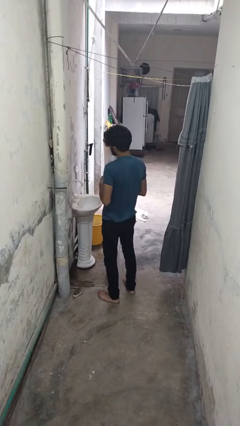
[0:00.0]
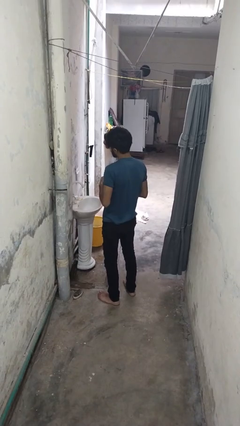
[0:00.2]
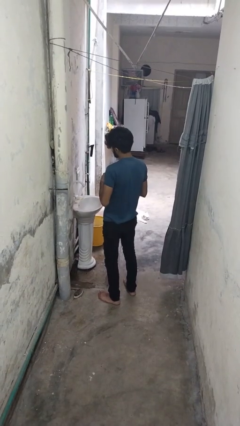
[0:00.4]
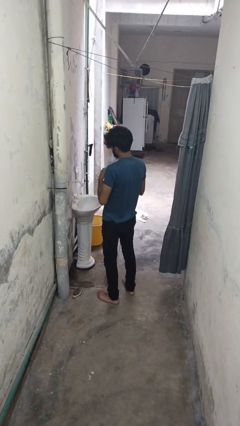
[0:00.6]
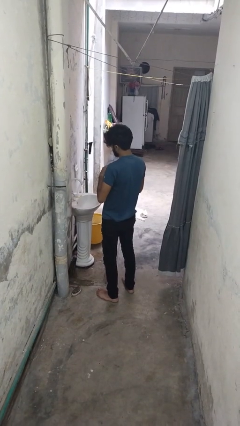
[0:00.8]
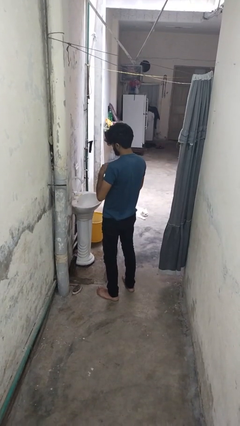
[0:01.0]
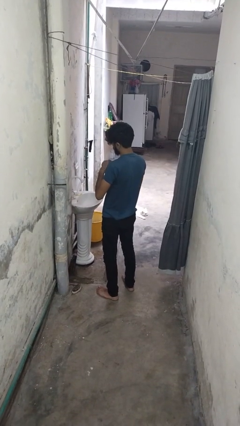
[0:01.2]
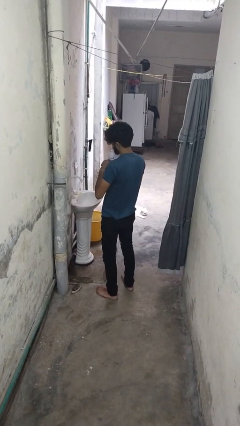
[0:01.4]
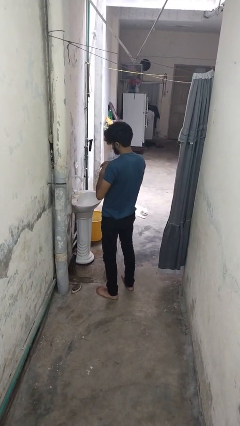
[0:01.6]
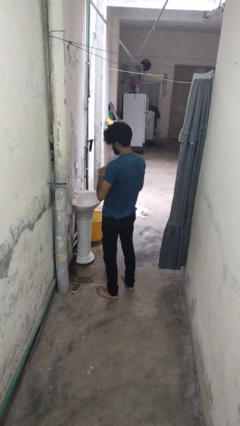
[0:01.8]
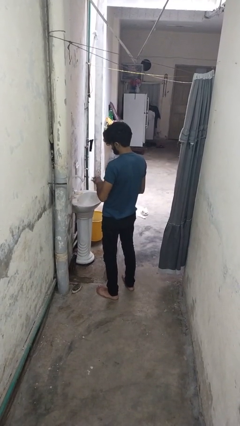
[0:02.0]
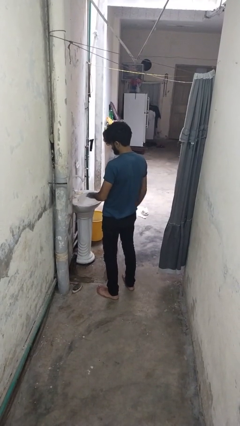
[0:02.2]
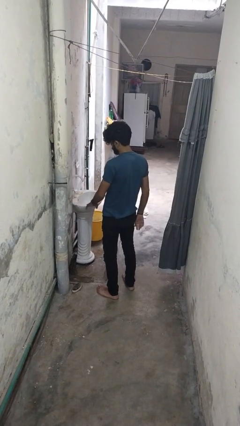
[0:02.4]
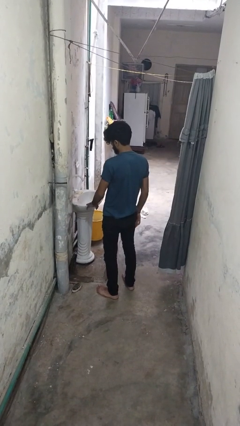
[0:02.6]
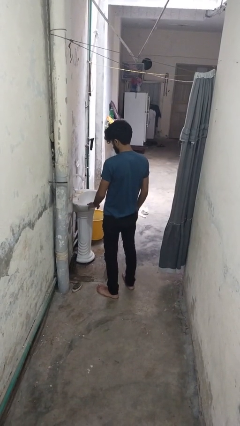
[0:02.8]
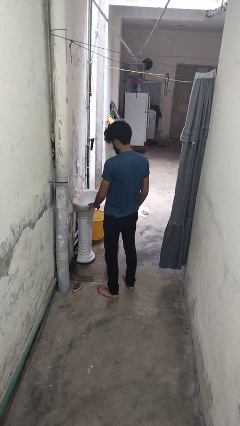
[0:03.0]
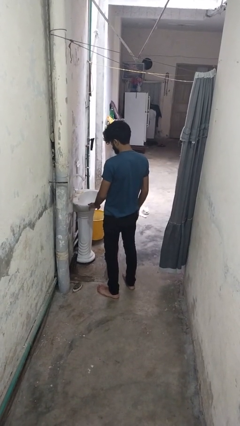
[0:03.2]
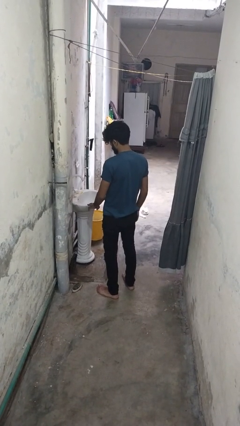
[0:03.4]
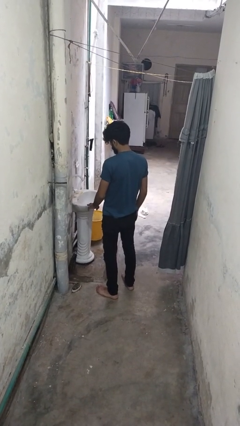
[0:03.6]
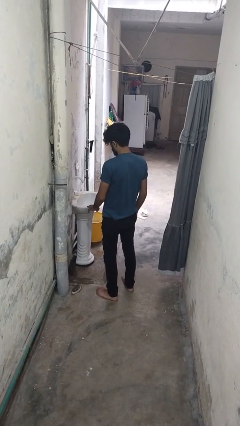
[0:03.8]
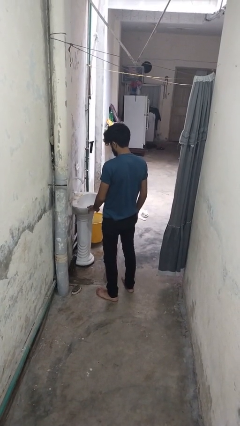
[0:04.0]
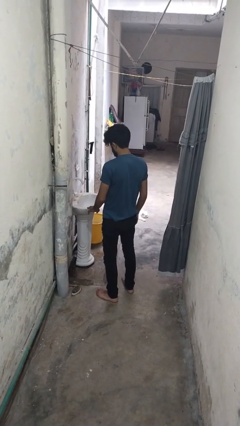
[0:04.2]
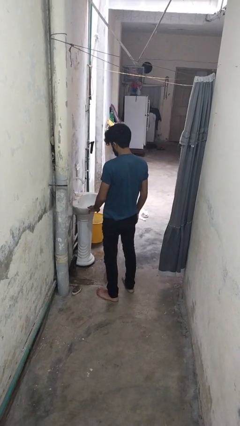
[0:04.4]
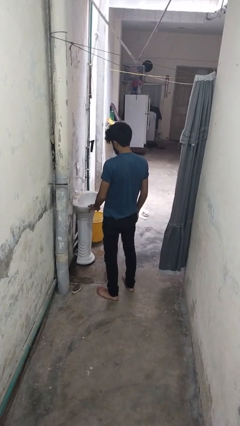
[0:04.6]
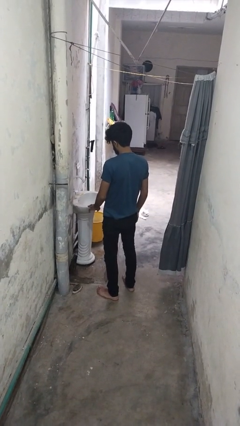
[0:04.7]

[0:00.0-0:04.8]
person puts on ring

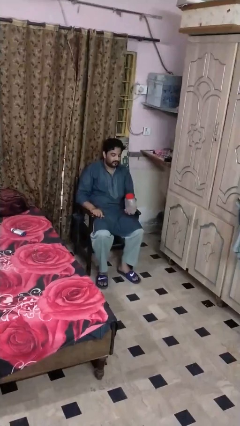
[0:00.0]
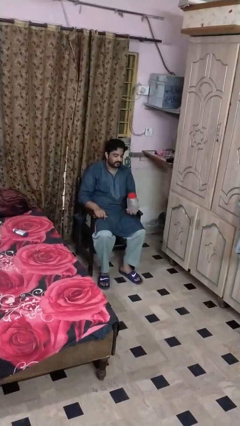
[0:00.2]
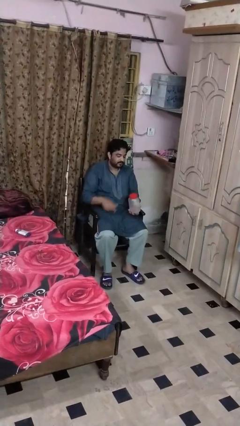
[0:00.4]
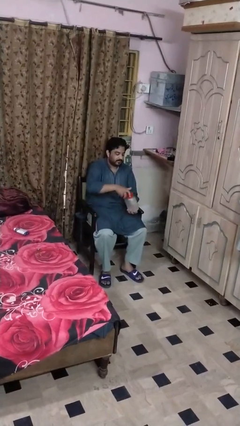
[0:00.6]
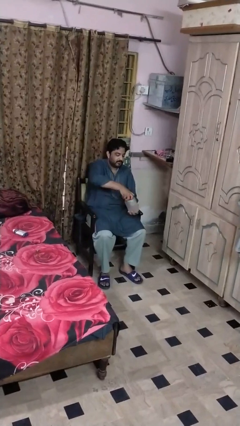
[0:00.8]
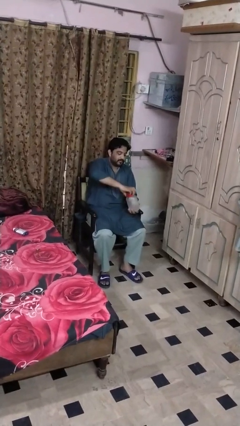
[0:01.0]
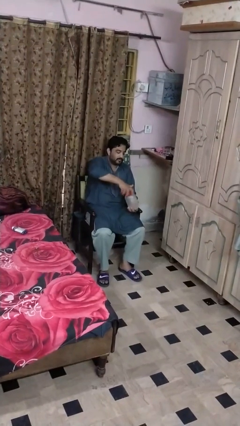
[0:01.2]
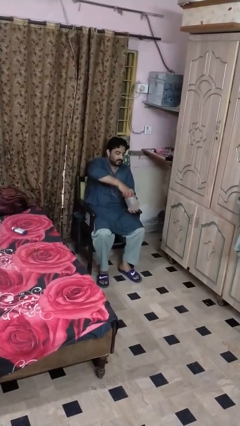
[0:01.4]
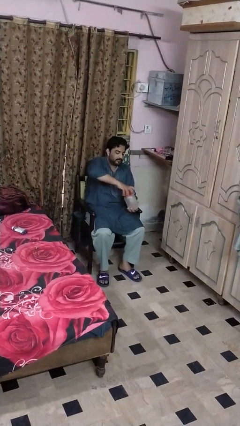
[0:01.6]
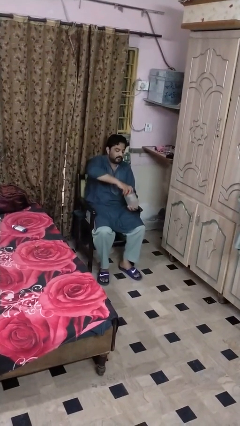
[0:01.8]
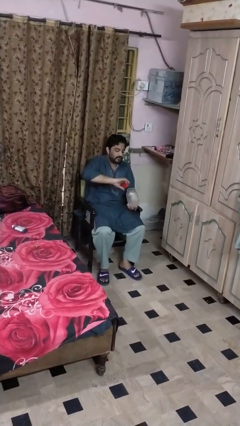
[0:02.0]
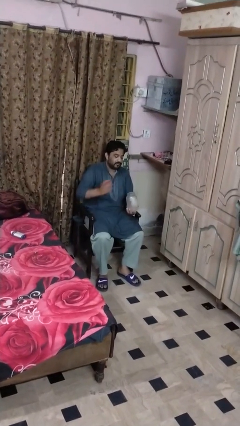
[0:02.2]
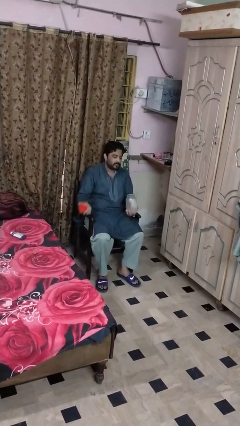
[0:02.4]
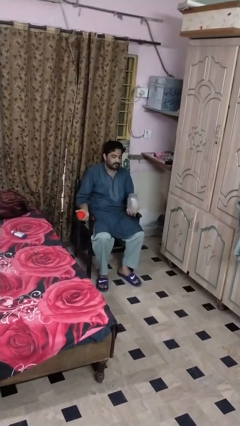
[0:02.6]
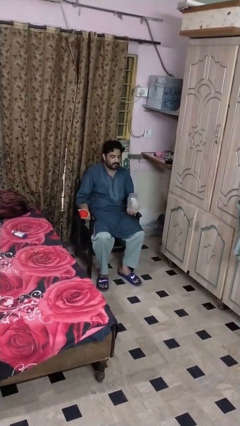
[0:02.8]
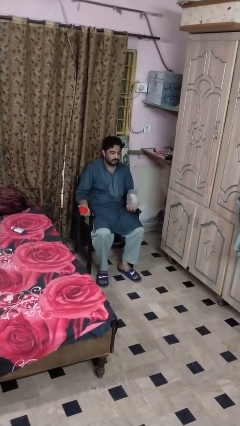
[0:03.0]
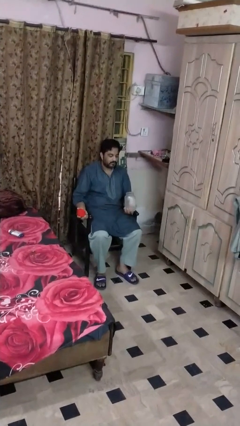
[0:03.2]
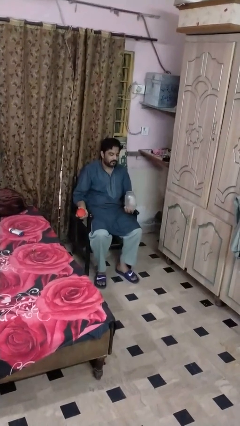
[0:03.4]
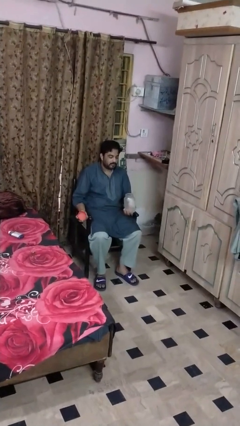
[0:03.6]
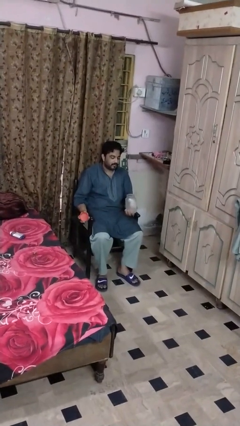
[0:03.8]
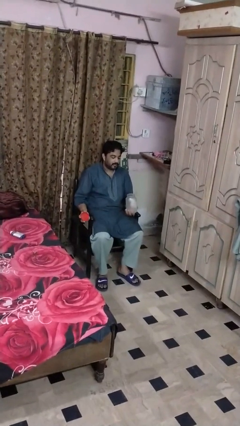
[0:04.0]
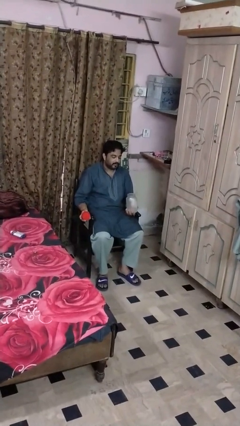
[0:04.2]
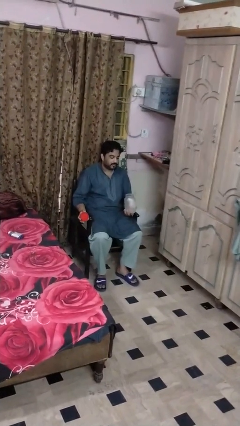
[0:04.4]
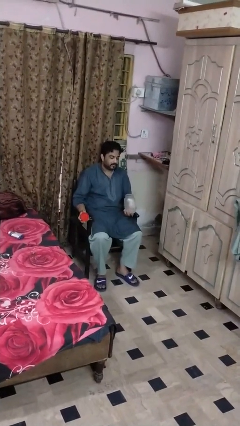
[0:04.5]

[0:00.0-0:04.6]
person opens jar

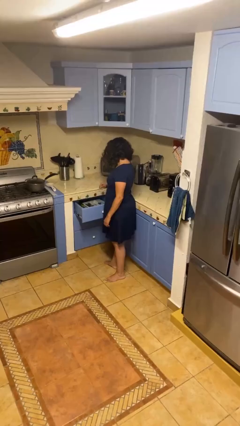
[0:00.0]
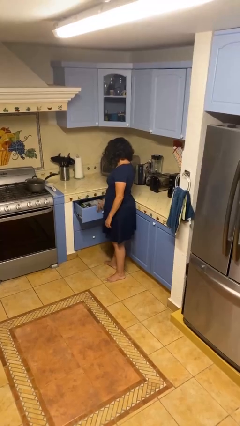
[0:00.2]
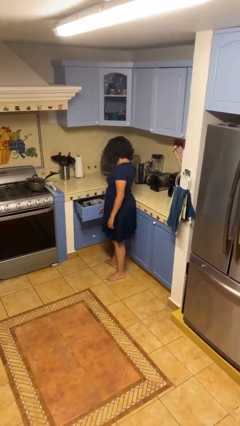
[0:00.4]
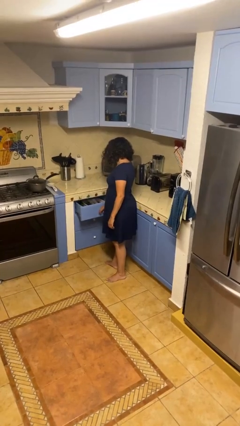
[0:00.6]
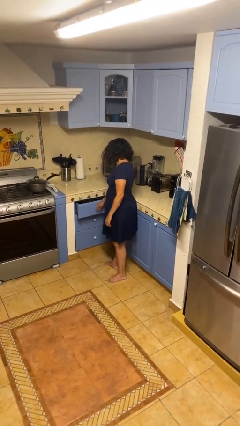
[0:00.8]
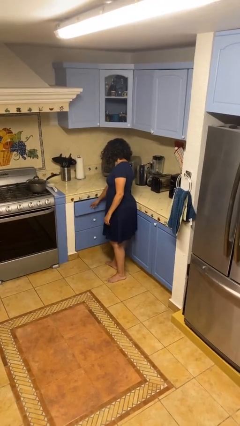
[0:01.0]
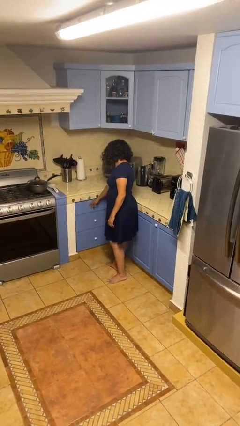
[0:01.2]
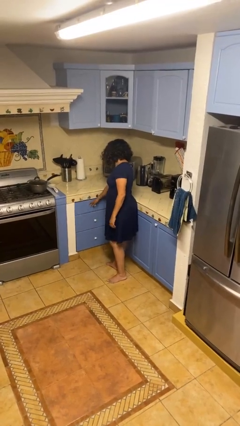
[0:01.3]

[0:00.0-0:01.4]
person closes kitchen drawer

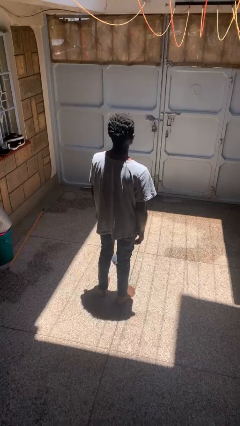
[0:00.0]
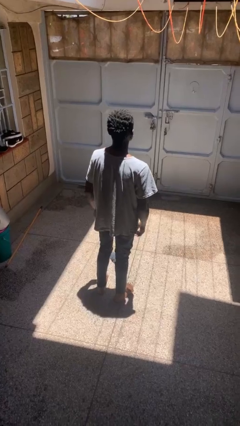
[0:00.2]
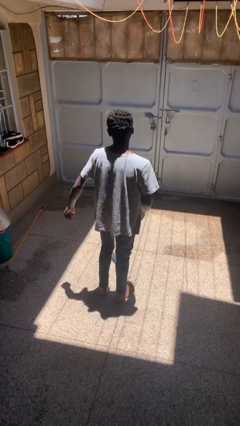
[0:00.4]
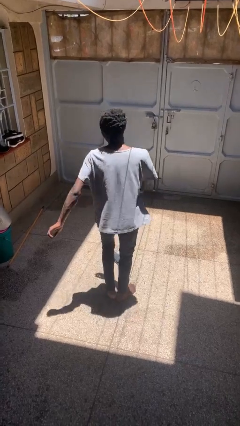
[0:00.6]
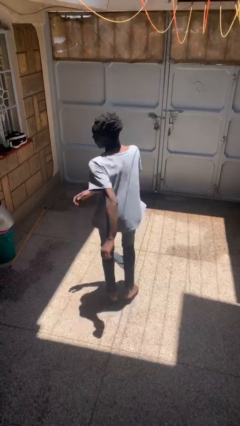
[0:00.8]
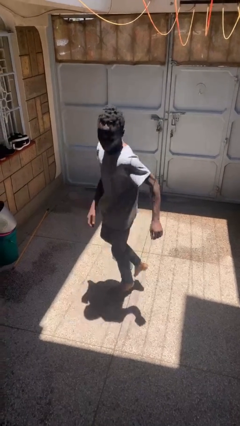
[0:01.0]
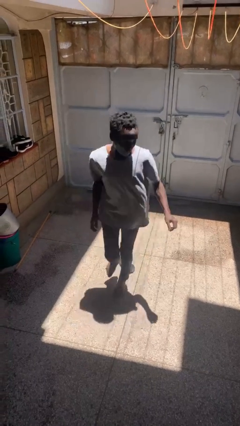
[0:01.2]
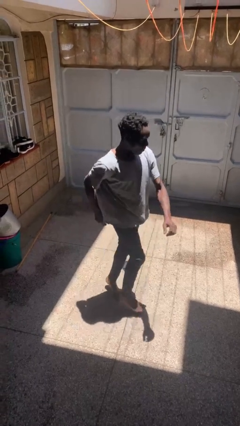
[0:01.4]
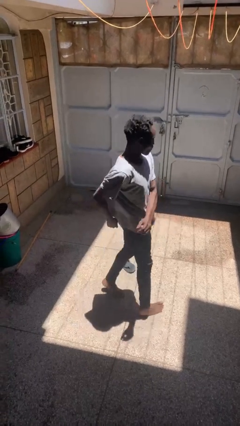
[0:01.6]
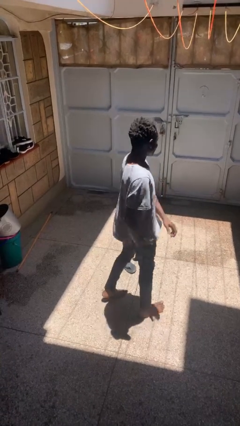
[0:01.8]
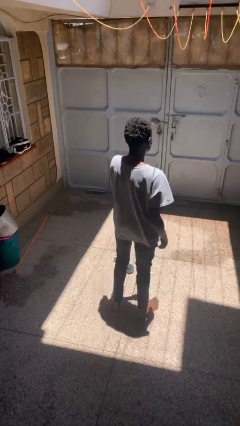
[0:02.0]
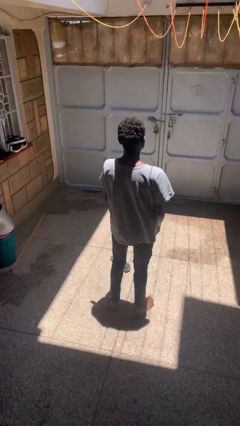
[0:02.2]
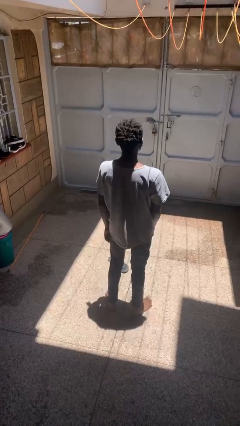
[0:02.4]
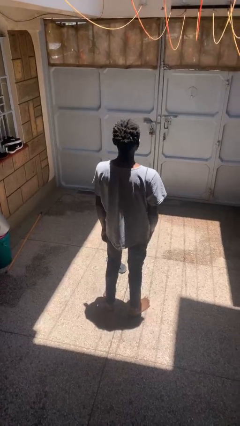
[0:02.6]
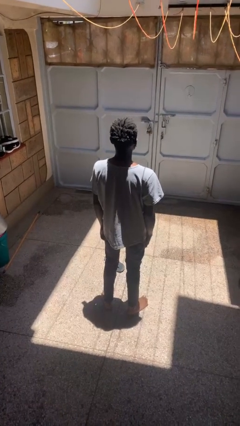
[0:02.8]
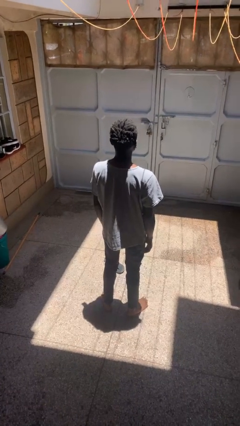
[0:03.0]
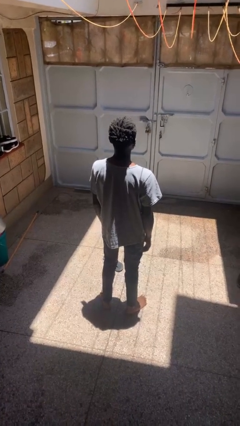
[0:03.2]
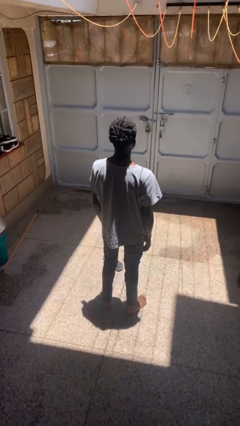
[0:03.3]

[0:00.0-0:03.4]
person twirls

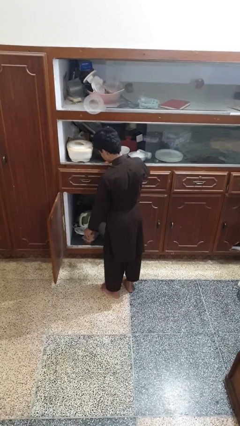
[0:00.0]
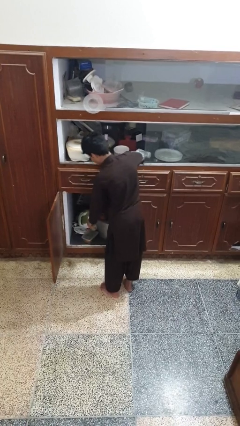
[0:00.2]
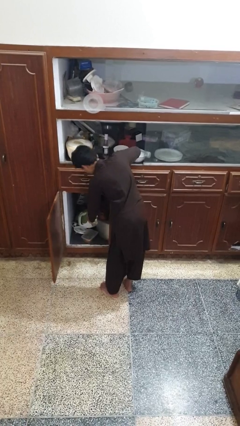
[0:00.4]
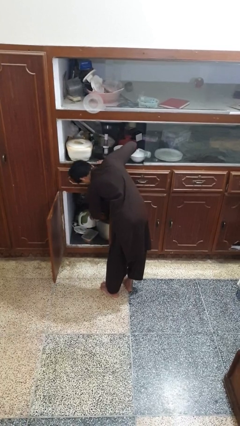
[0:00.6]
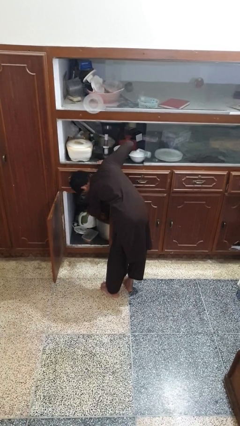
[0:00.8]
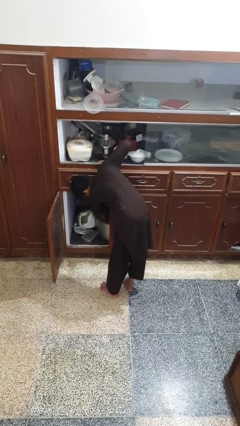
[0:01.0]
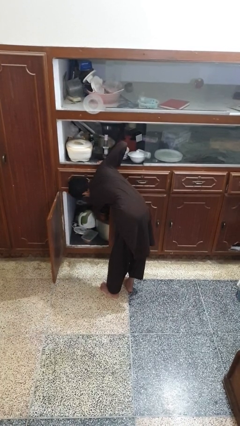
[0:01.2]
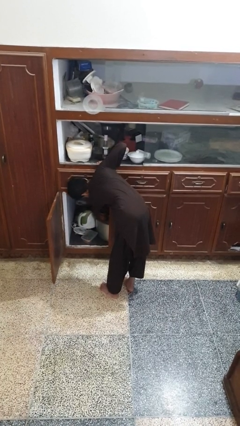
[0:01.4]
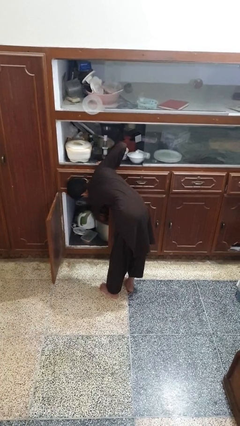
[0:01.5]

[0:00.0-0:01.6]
person puts object in cabinet

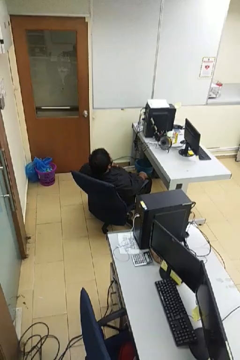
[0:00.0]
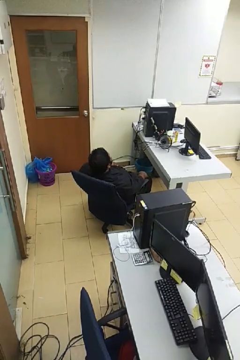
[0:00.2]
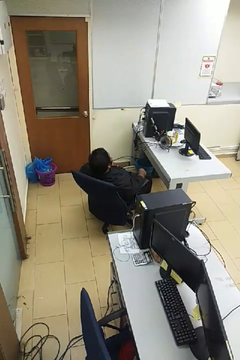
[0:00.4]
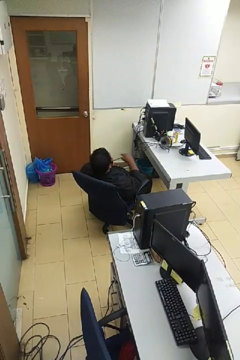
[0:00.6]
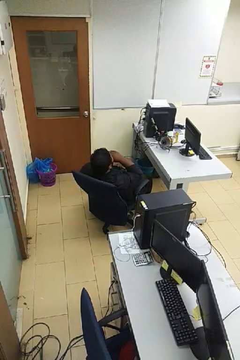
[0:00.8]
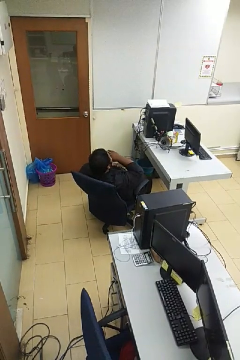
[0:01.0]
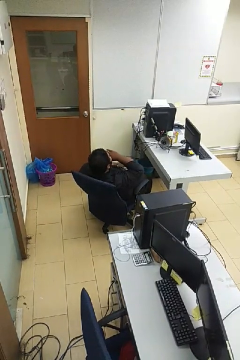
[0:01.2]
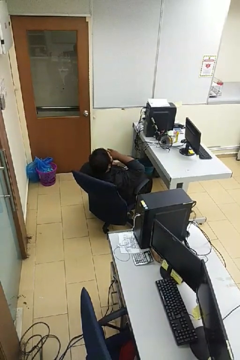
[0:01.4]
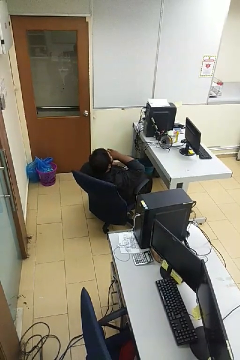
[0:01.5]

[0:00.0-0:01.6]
person yawns
